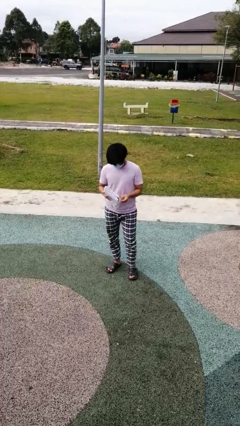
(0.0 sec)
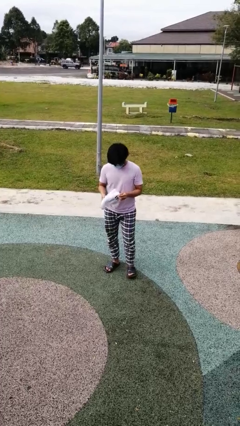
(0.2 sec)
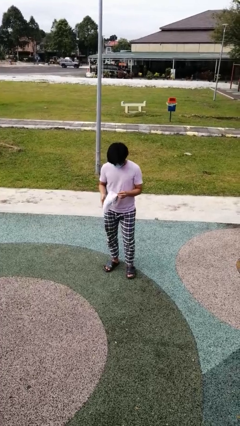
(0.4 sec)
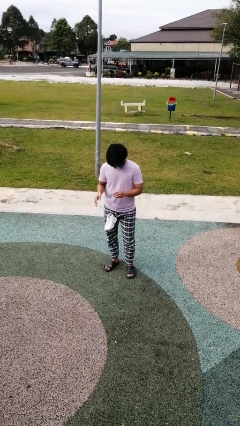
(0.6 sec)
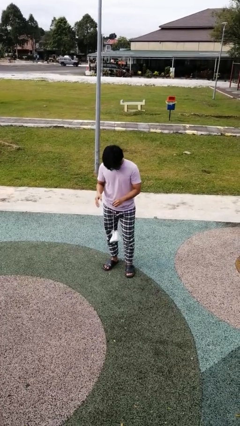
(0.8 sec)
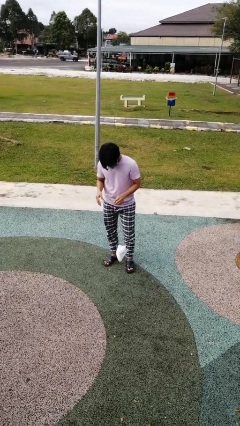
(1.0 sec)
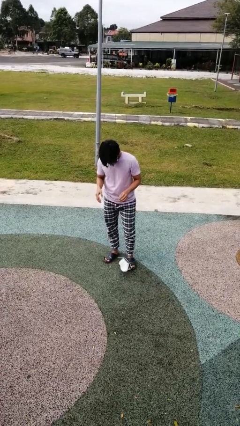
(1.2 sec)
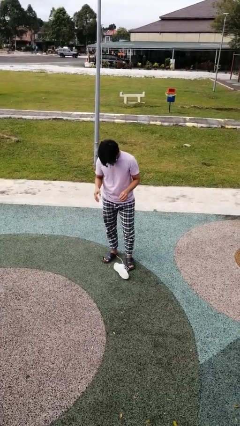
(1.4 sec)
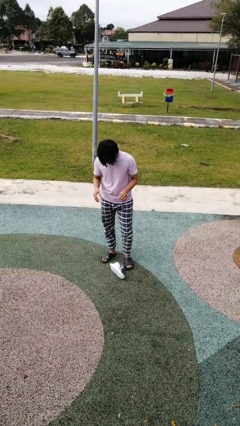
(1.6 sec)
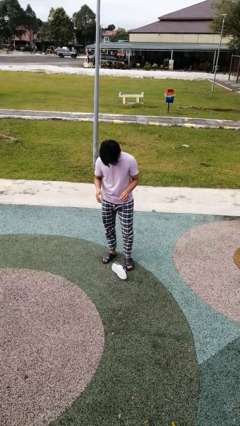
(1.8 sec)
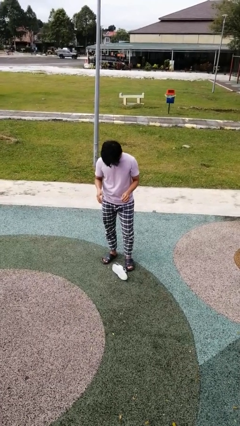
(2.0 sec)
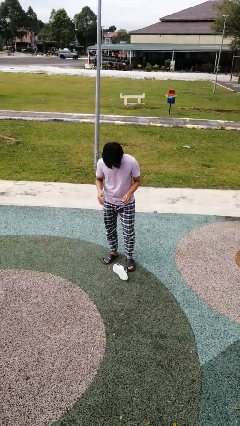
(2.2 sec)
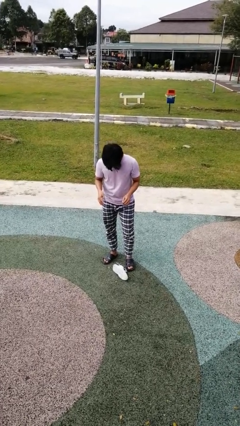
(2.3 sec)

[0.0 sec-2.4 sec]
person drops object

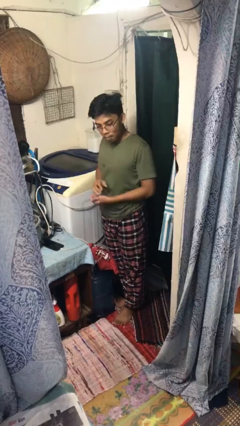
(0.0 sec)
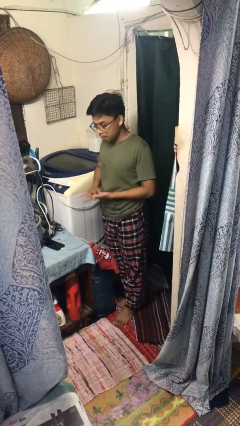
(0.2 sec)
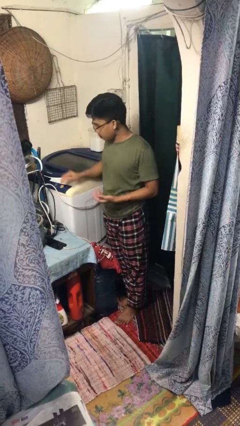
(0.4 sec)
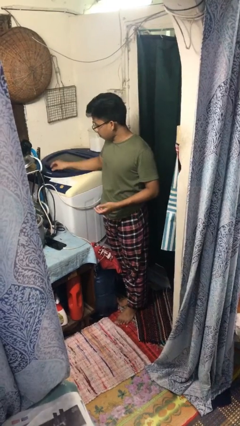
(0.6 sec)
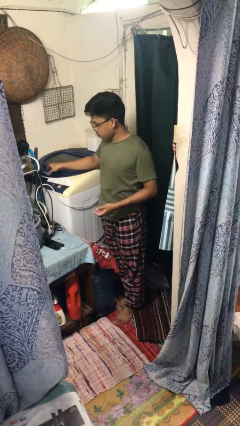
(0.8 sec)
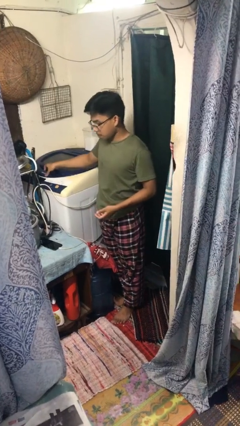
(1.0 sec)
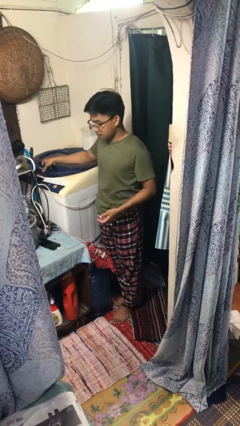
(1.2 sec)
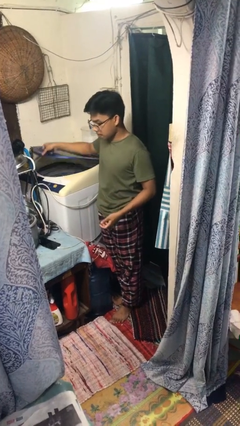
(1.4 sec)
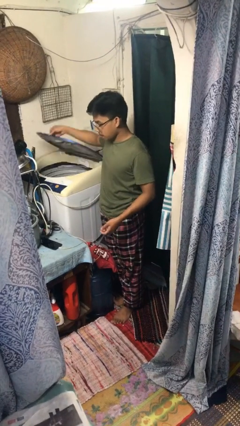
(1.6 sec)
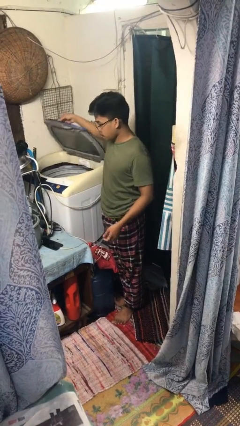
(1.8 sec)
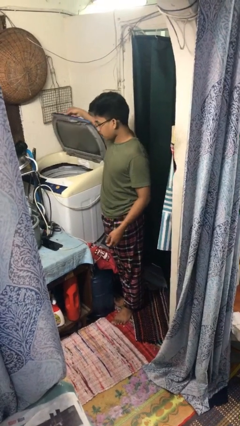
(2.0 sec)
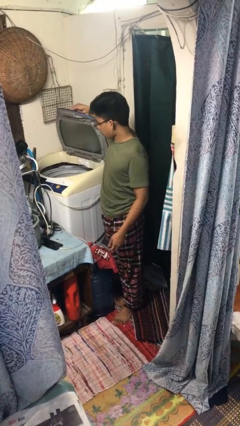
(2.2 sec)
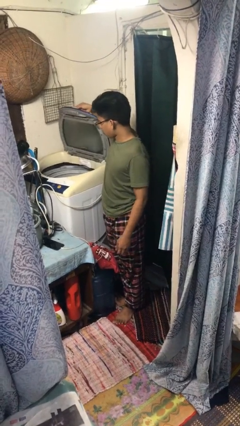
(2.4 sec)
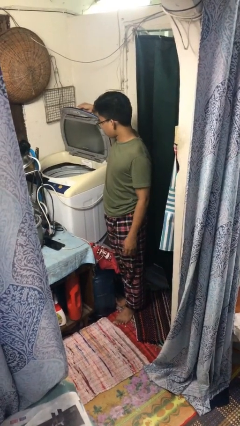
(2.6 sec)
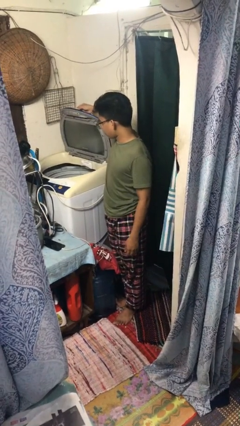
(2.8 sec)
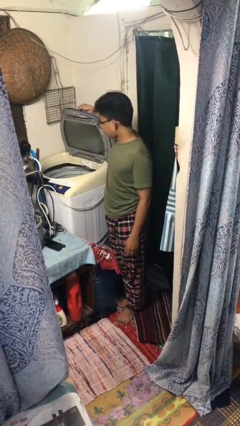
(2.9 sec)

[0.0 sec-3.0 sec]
person opens clothes washer

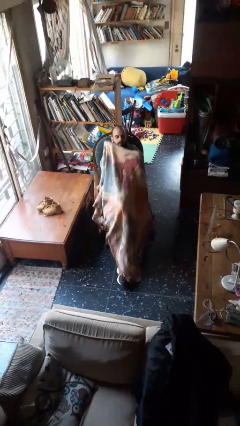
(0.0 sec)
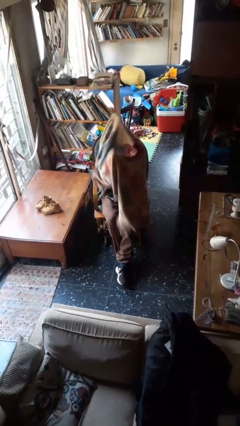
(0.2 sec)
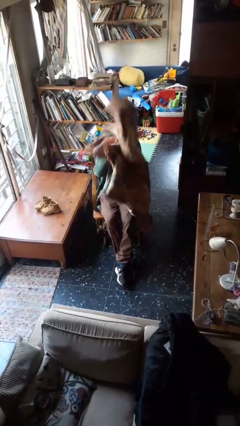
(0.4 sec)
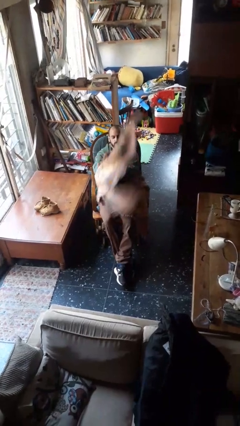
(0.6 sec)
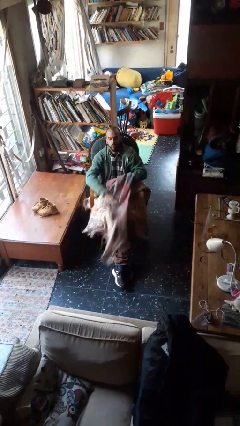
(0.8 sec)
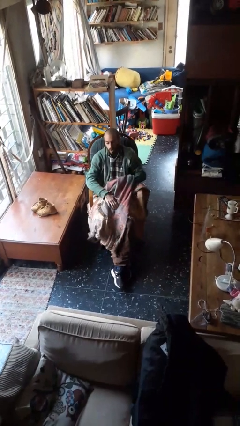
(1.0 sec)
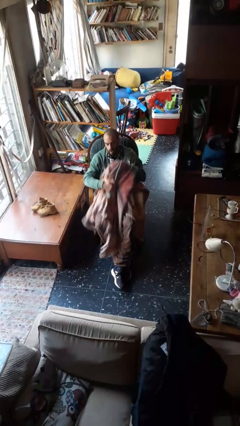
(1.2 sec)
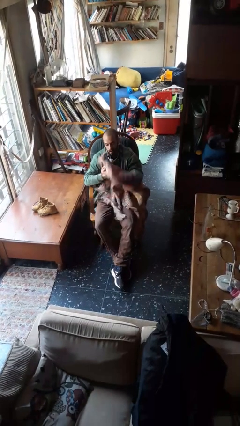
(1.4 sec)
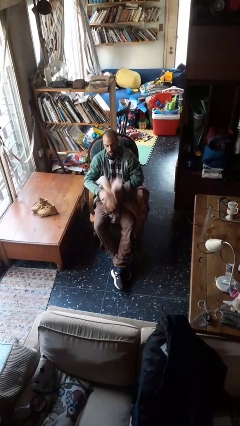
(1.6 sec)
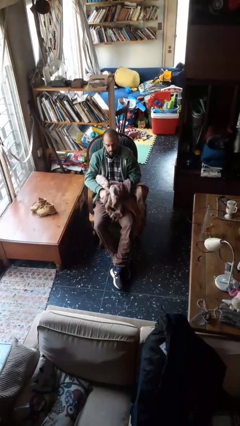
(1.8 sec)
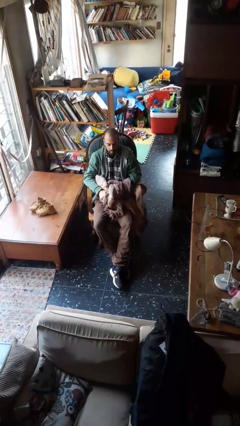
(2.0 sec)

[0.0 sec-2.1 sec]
person uncovers with blanket

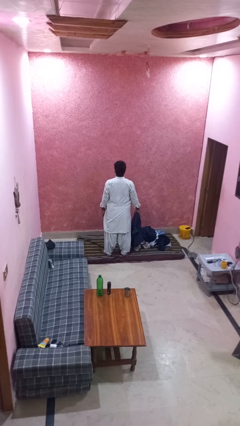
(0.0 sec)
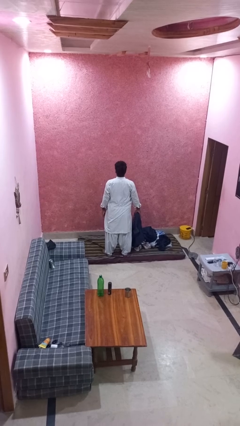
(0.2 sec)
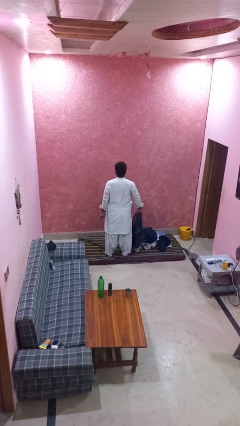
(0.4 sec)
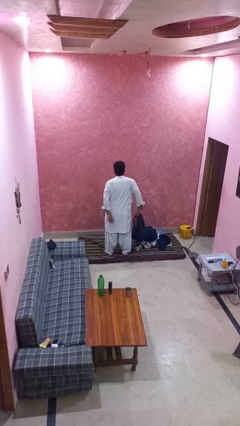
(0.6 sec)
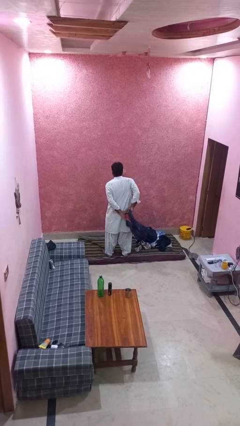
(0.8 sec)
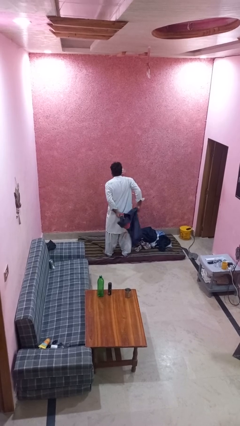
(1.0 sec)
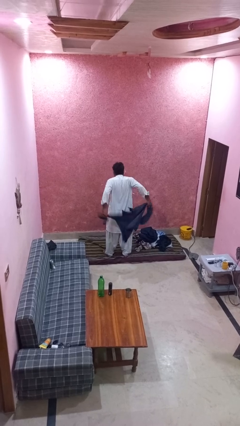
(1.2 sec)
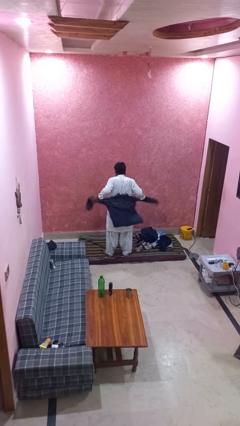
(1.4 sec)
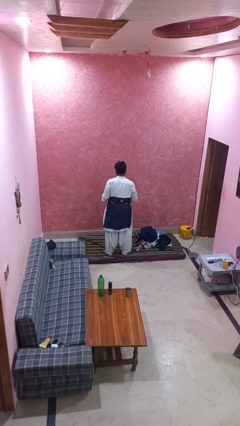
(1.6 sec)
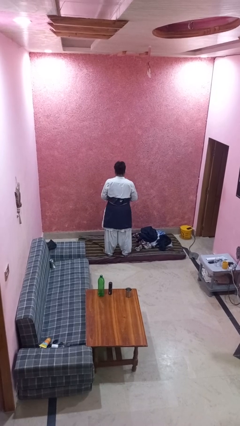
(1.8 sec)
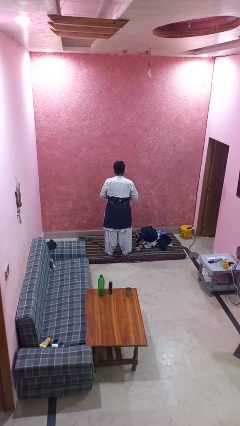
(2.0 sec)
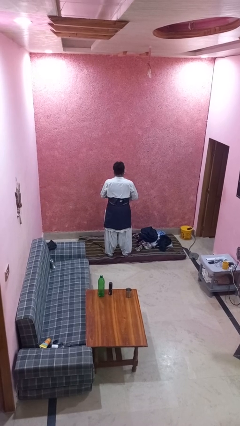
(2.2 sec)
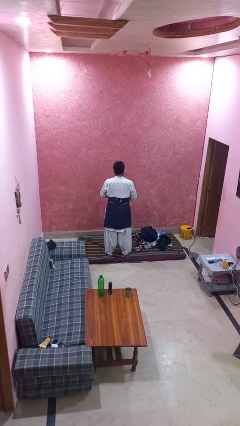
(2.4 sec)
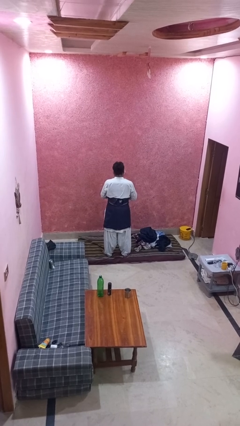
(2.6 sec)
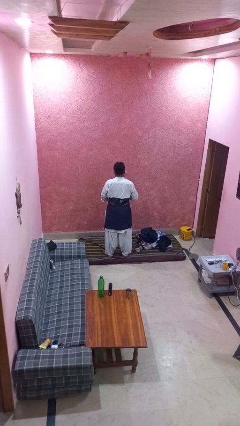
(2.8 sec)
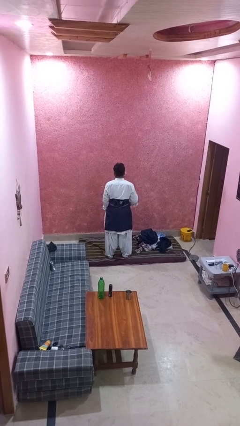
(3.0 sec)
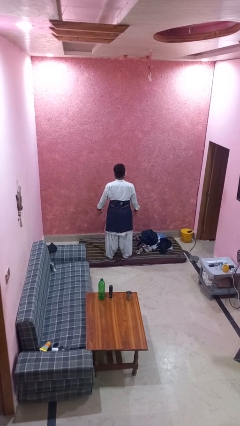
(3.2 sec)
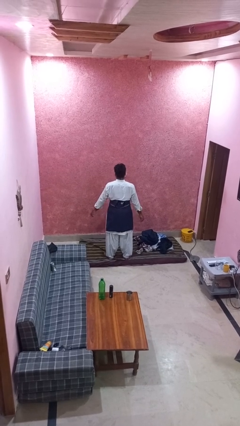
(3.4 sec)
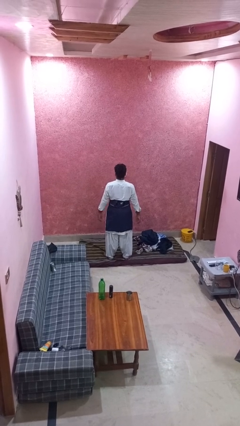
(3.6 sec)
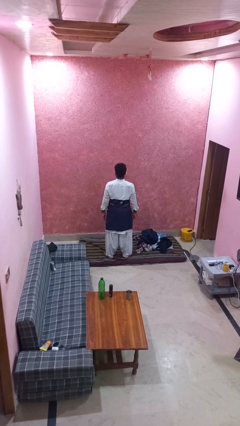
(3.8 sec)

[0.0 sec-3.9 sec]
person ties jacket around waist

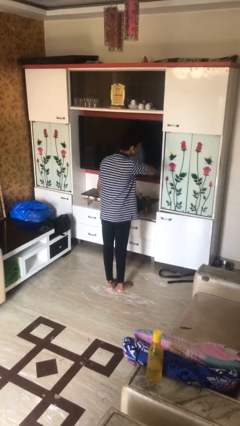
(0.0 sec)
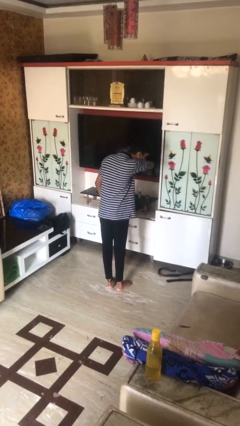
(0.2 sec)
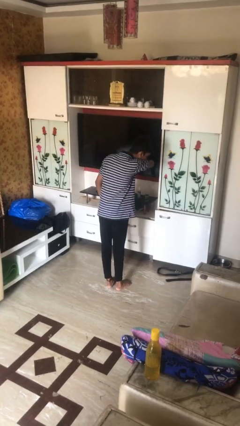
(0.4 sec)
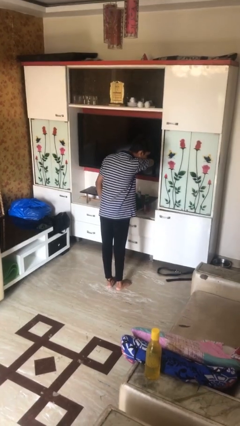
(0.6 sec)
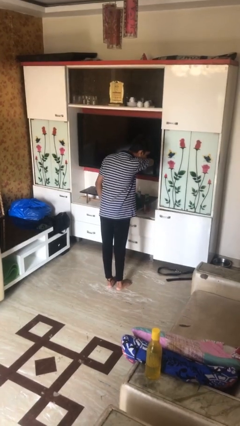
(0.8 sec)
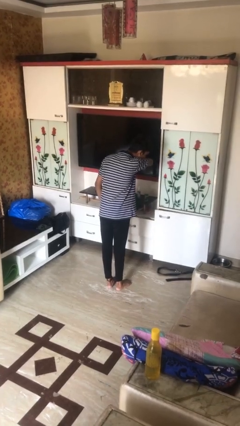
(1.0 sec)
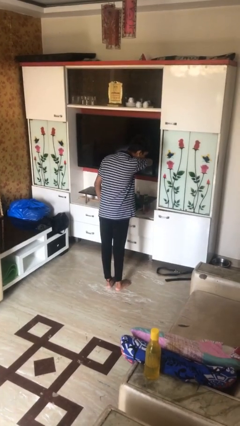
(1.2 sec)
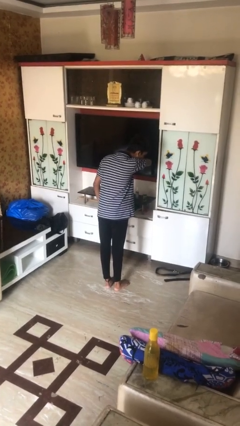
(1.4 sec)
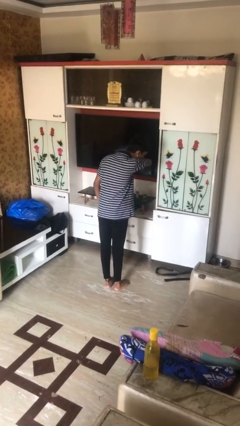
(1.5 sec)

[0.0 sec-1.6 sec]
person sneezes into arm

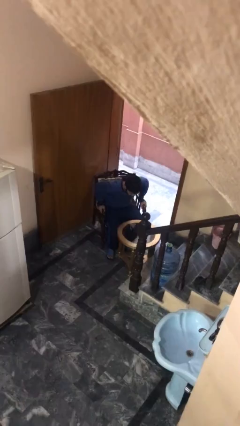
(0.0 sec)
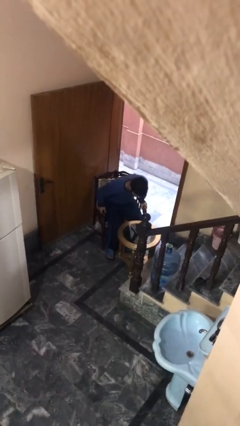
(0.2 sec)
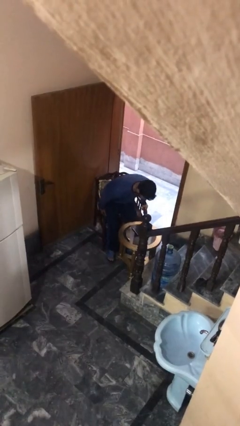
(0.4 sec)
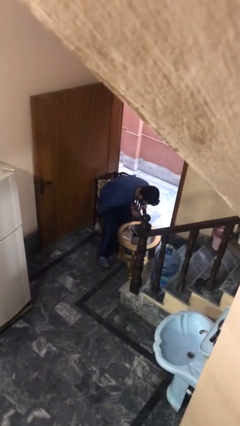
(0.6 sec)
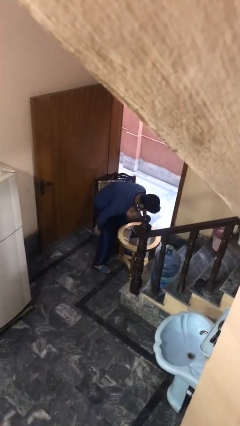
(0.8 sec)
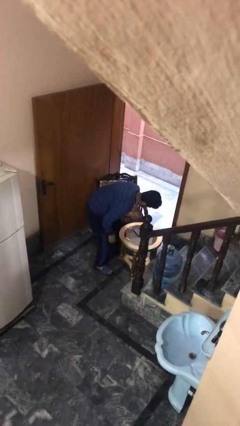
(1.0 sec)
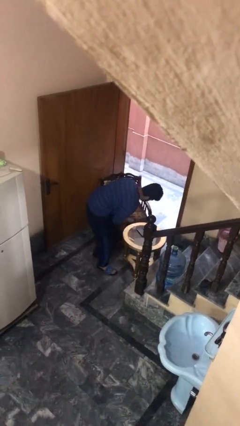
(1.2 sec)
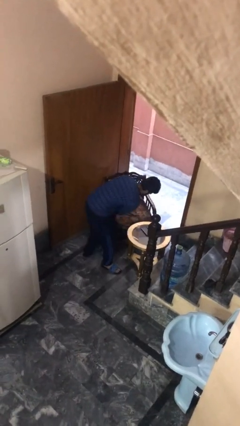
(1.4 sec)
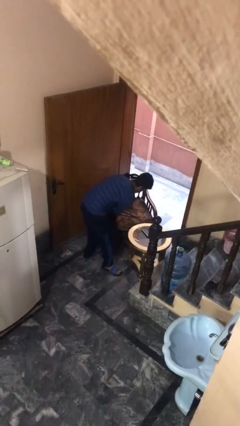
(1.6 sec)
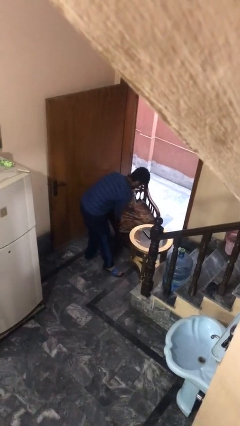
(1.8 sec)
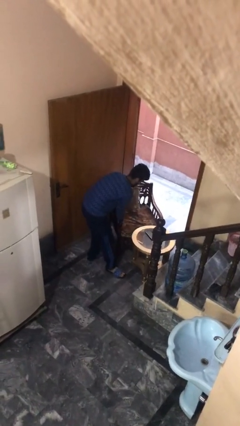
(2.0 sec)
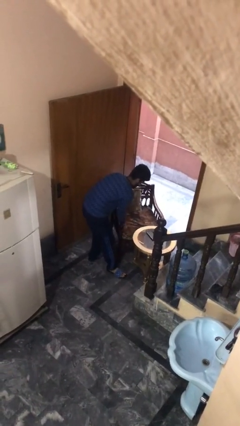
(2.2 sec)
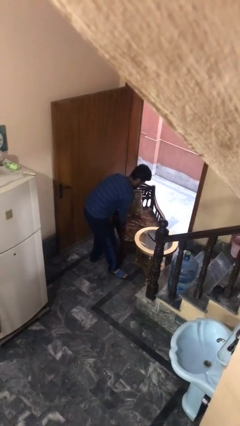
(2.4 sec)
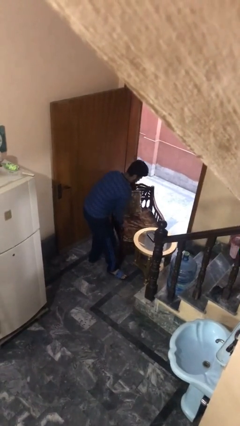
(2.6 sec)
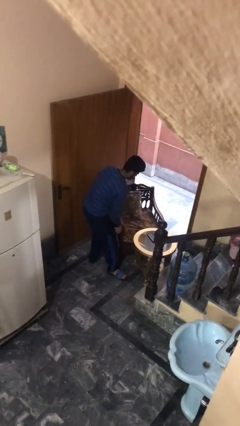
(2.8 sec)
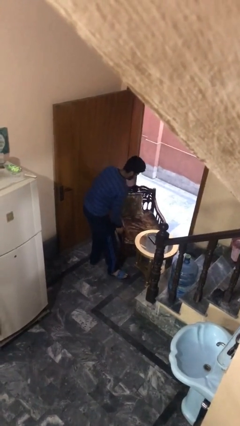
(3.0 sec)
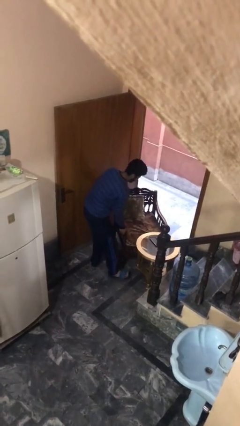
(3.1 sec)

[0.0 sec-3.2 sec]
person stands up

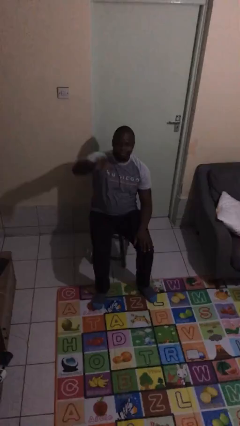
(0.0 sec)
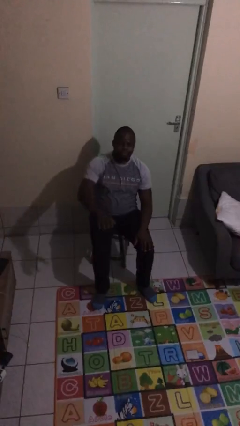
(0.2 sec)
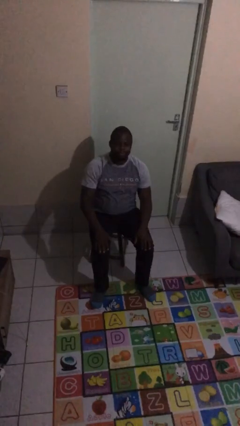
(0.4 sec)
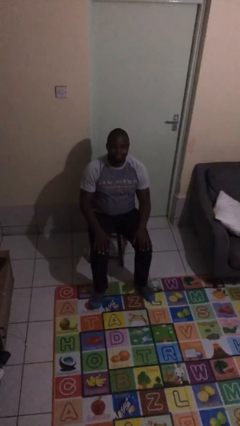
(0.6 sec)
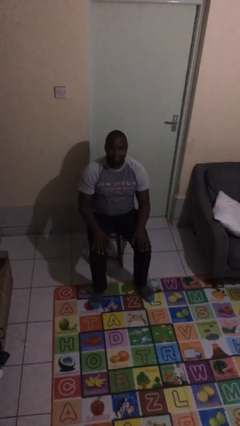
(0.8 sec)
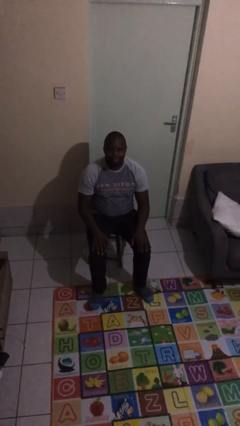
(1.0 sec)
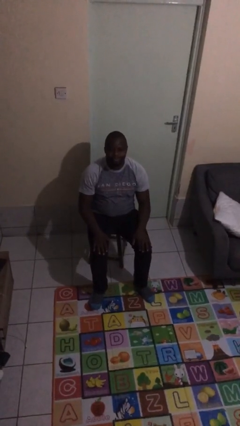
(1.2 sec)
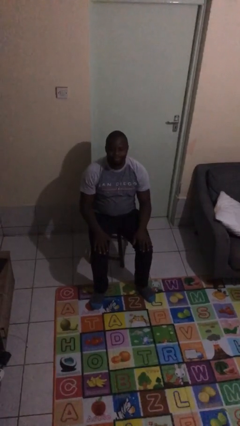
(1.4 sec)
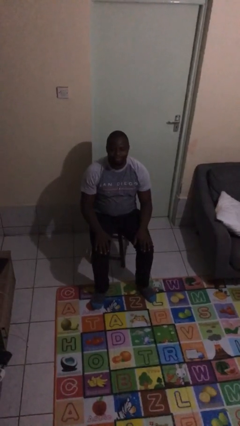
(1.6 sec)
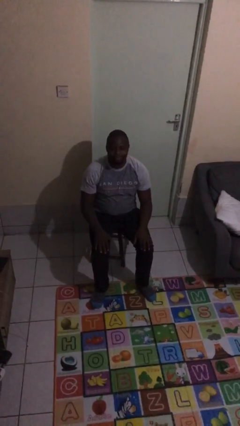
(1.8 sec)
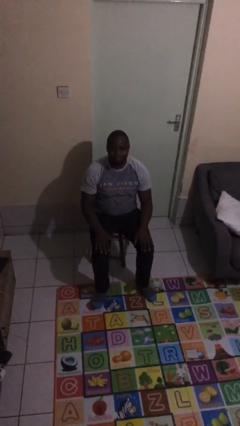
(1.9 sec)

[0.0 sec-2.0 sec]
person gestures lower hand
